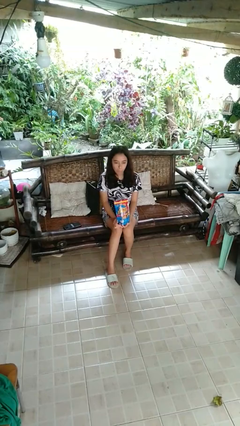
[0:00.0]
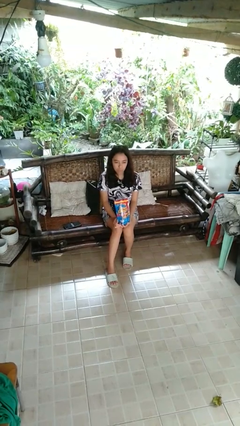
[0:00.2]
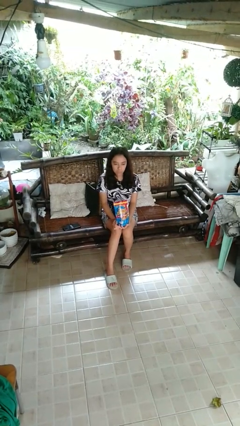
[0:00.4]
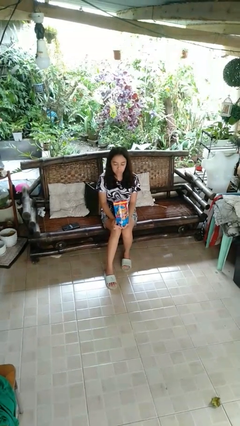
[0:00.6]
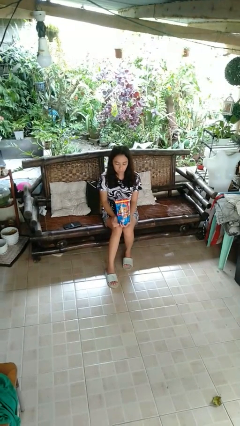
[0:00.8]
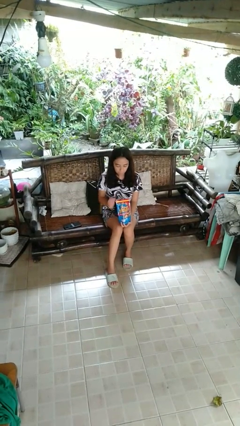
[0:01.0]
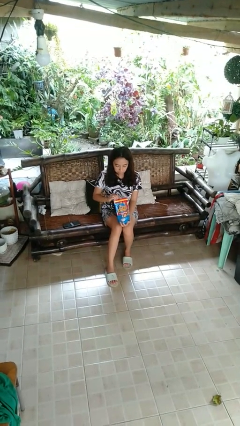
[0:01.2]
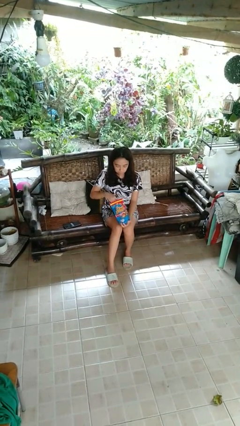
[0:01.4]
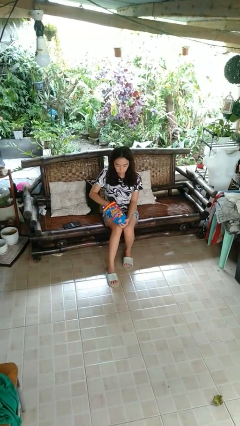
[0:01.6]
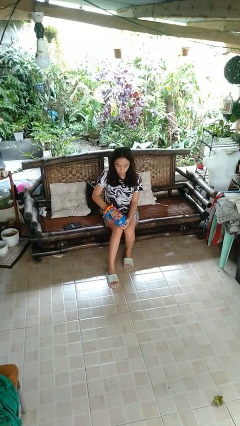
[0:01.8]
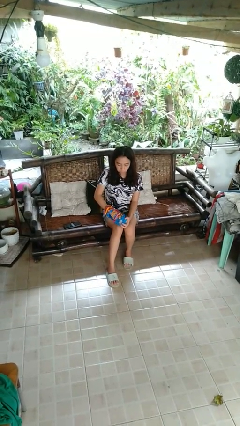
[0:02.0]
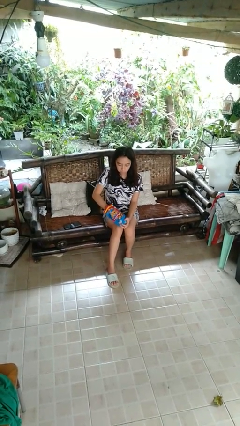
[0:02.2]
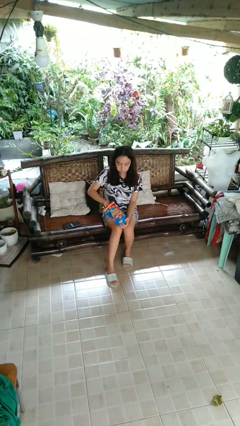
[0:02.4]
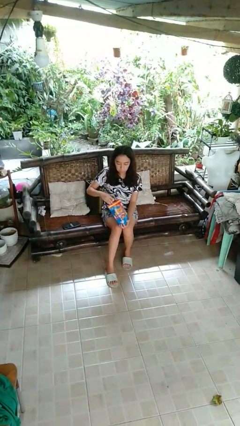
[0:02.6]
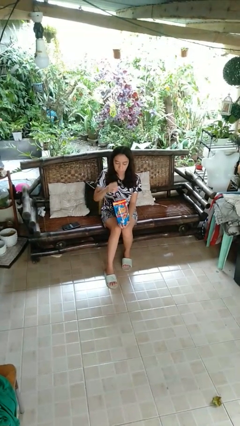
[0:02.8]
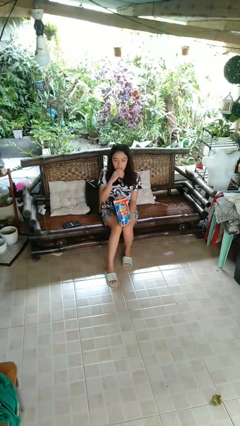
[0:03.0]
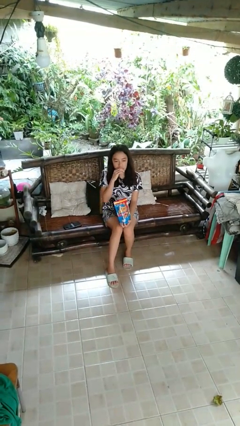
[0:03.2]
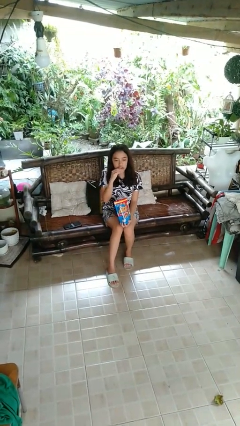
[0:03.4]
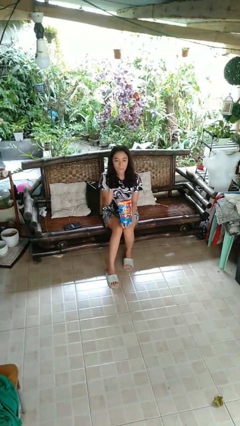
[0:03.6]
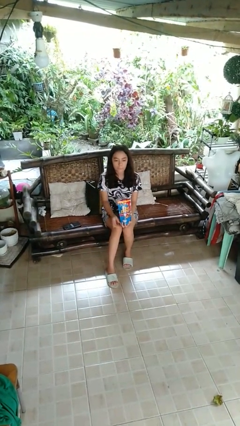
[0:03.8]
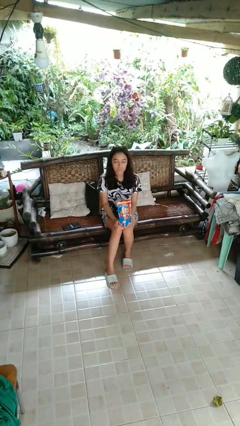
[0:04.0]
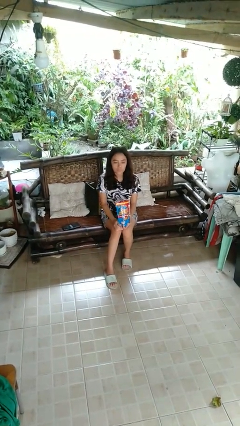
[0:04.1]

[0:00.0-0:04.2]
person eats snack from bag

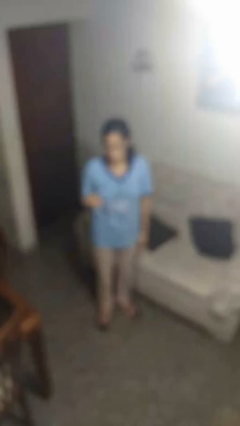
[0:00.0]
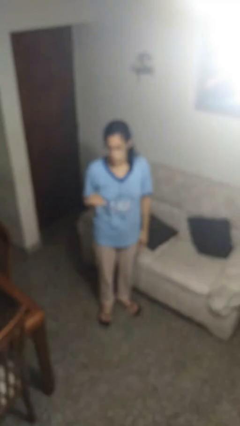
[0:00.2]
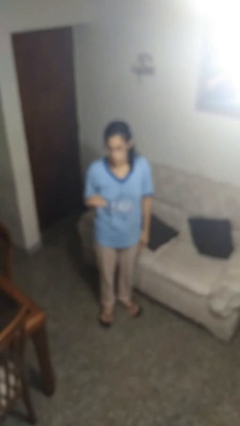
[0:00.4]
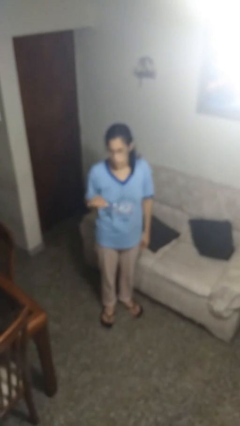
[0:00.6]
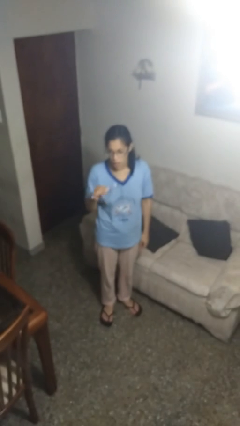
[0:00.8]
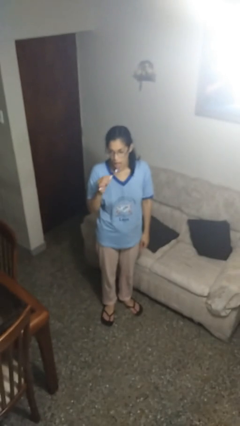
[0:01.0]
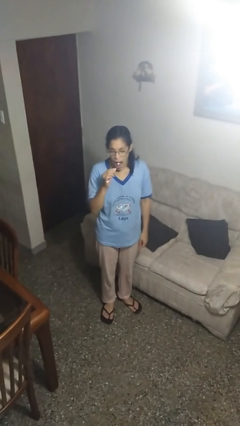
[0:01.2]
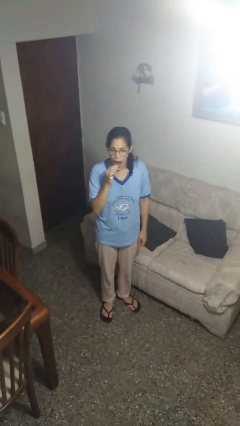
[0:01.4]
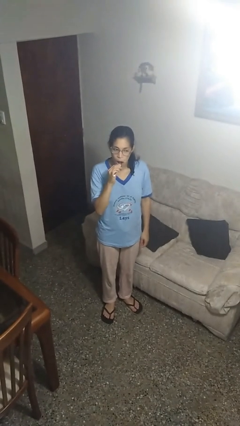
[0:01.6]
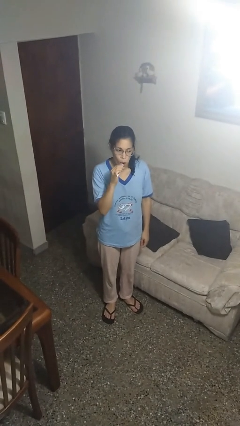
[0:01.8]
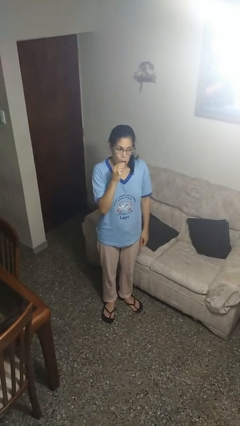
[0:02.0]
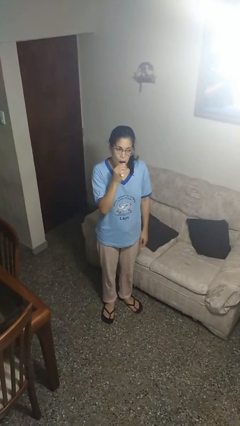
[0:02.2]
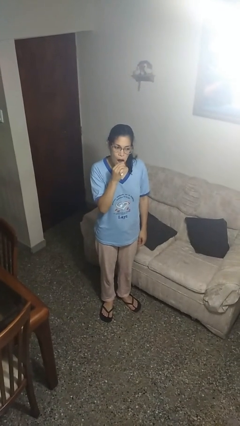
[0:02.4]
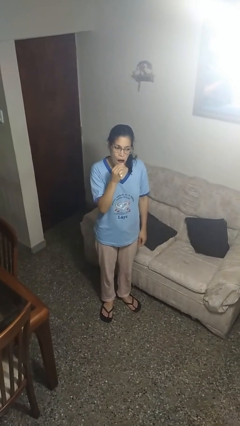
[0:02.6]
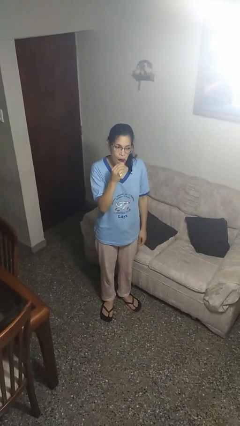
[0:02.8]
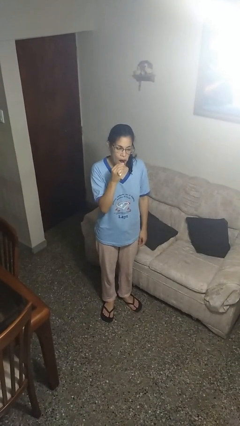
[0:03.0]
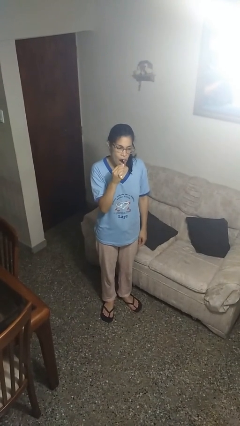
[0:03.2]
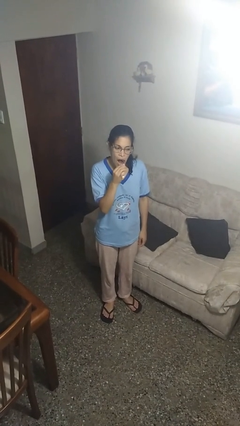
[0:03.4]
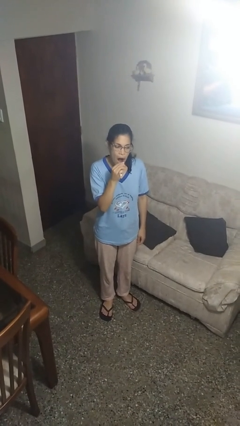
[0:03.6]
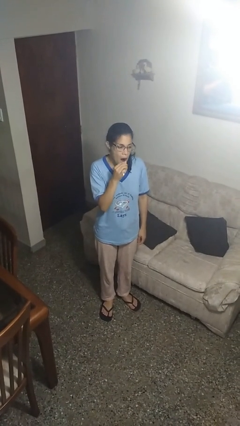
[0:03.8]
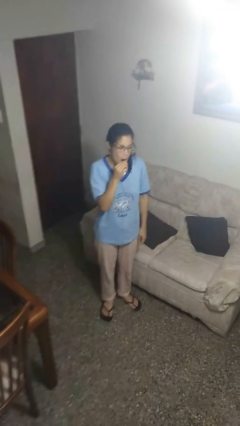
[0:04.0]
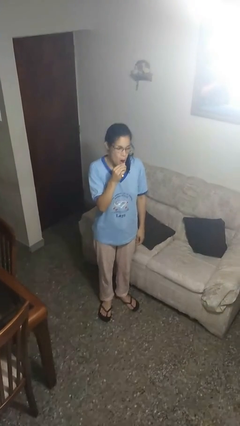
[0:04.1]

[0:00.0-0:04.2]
person brushes teeth

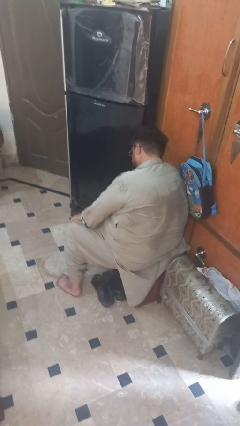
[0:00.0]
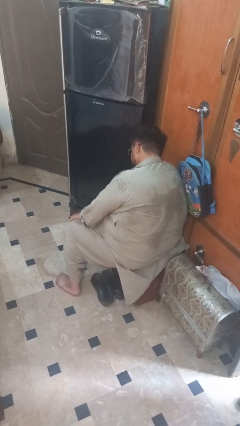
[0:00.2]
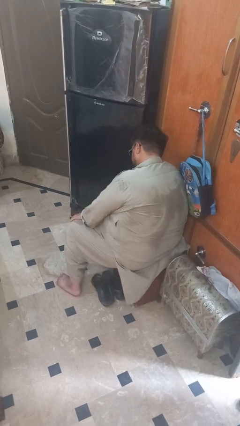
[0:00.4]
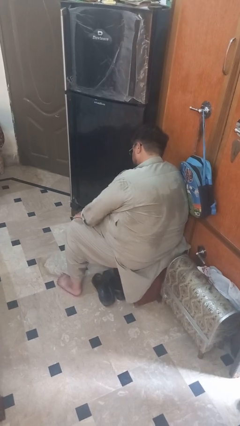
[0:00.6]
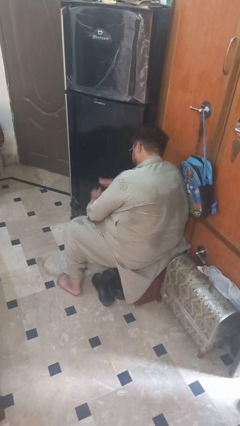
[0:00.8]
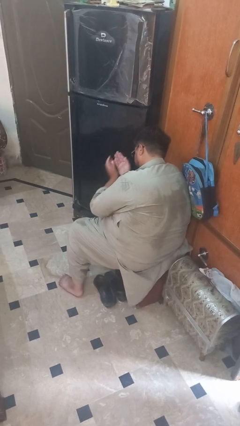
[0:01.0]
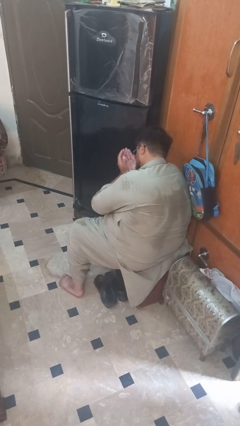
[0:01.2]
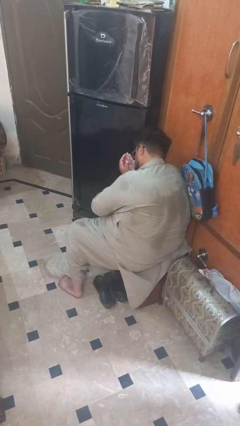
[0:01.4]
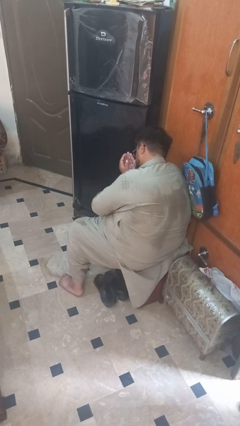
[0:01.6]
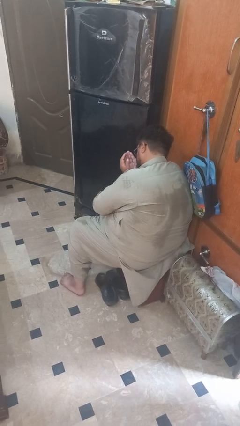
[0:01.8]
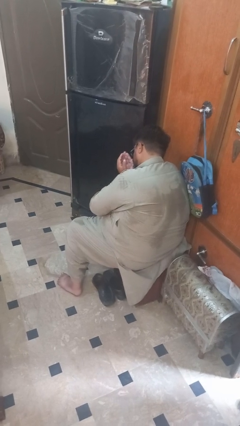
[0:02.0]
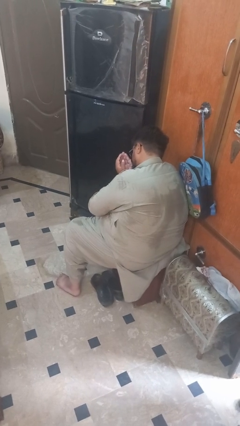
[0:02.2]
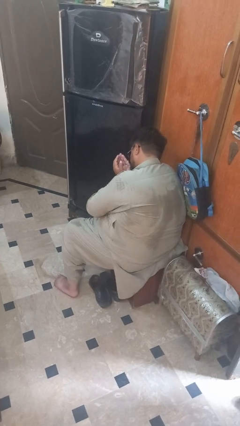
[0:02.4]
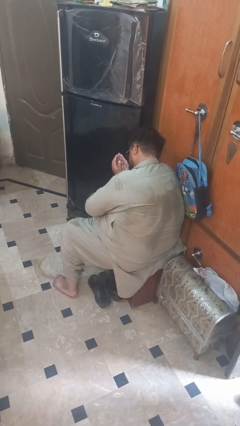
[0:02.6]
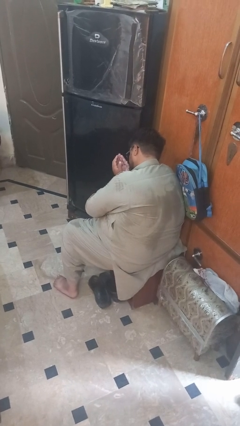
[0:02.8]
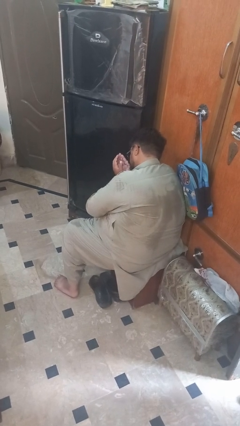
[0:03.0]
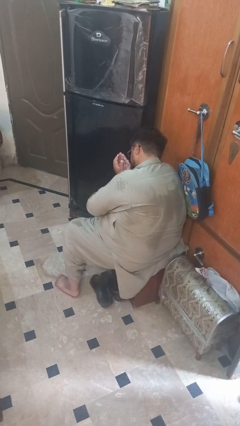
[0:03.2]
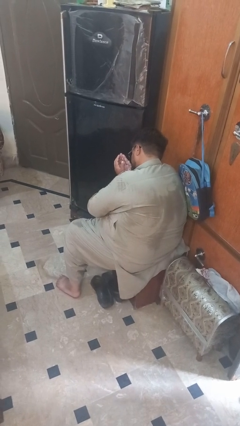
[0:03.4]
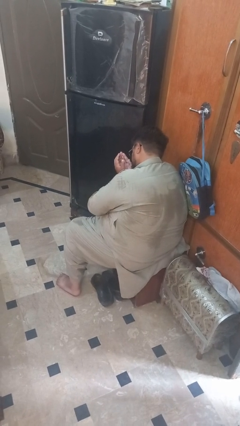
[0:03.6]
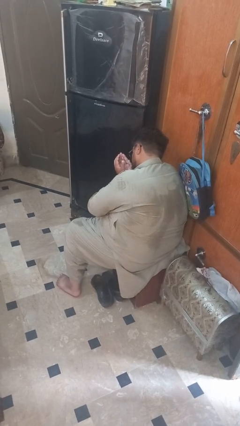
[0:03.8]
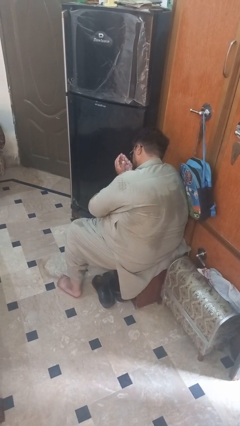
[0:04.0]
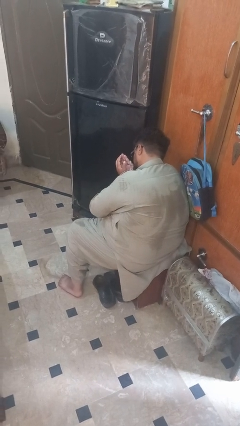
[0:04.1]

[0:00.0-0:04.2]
person prays

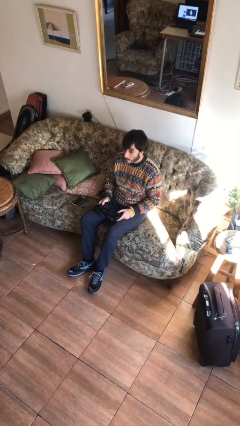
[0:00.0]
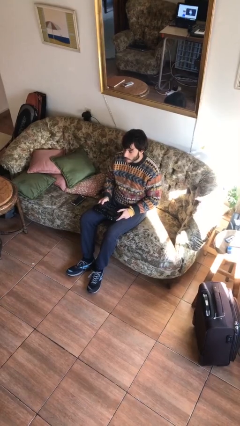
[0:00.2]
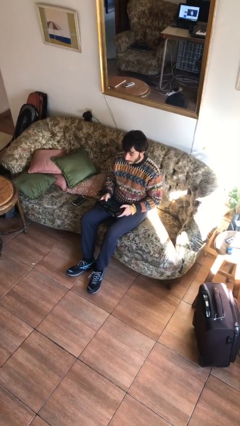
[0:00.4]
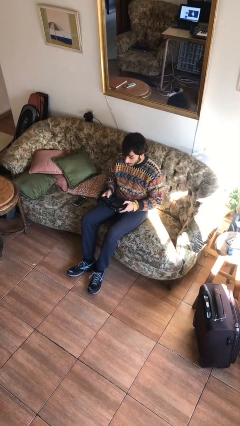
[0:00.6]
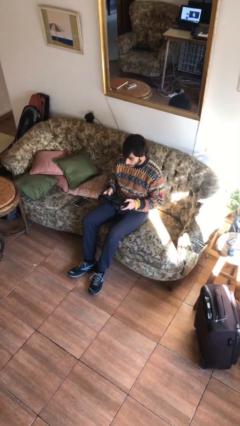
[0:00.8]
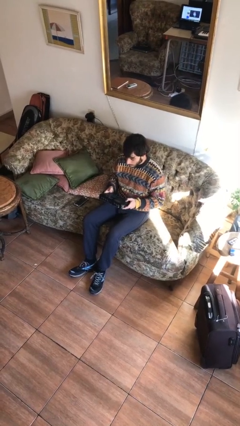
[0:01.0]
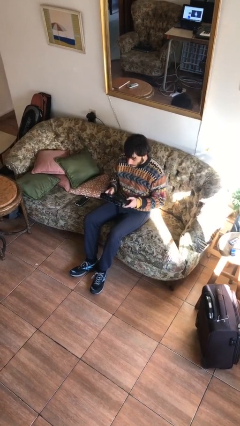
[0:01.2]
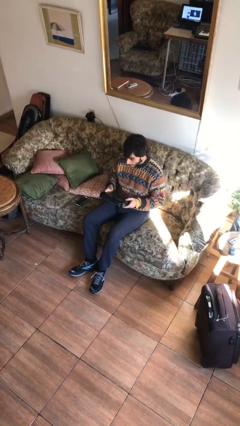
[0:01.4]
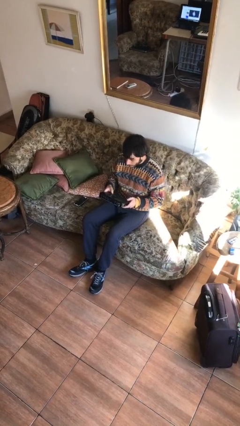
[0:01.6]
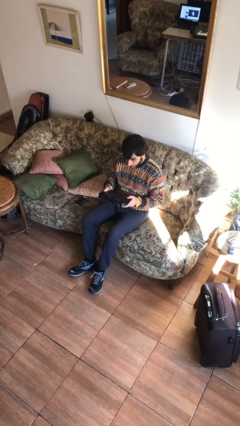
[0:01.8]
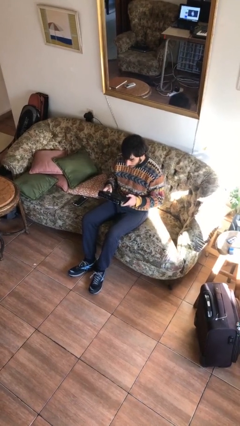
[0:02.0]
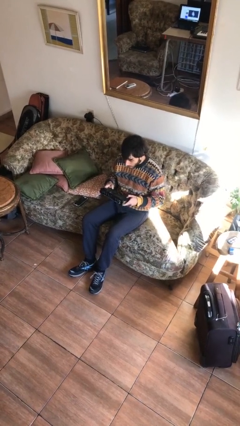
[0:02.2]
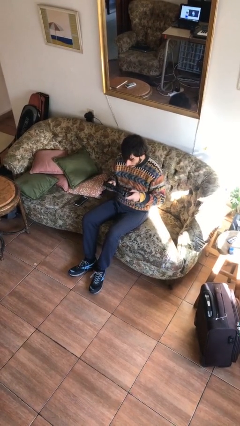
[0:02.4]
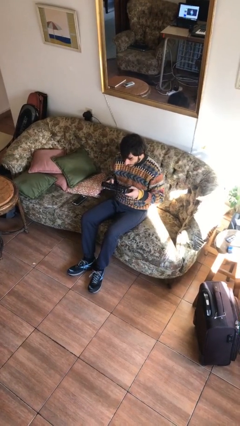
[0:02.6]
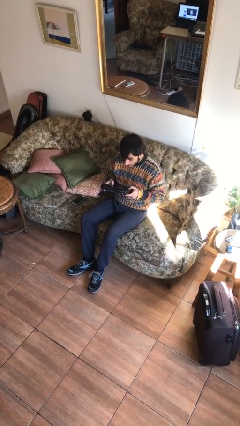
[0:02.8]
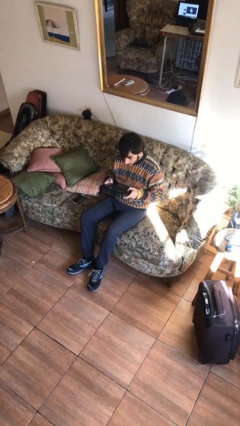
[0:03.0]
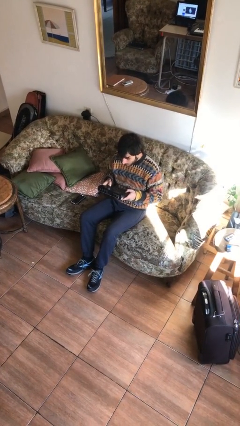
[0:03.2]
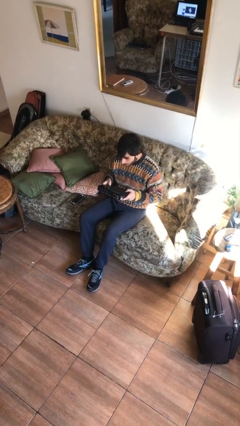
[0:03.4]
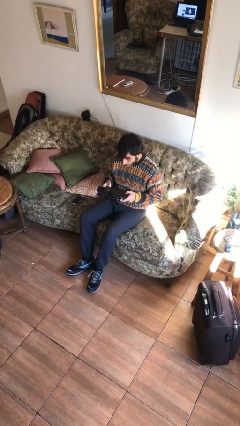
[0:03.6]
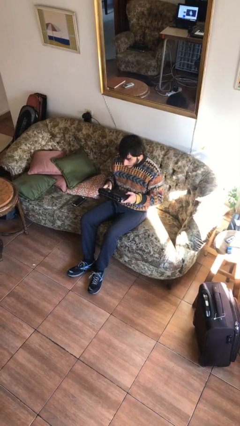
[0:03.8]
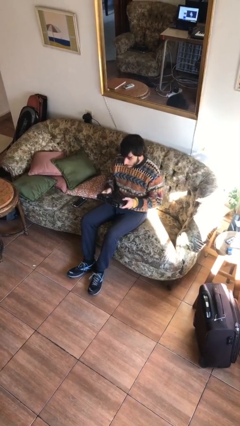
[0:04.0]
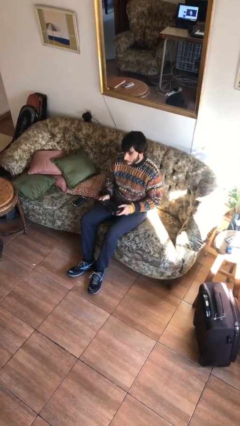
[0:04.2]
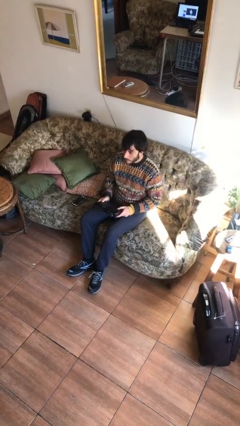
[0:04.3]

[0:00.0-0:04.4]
person interacts with handheld game

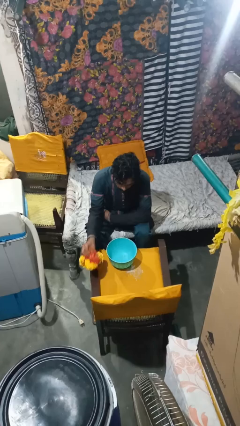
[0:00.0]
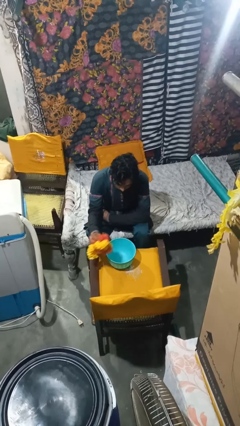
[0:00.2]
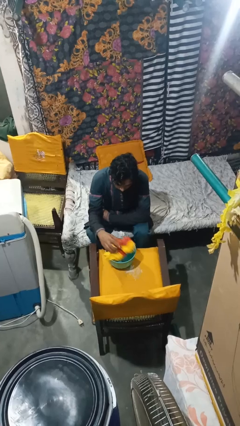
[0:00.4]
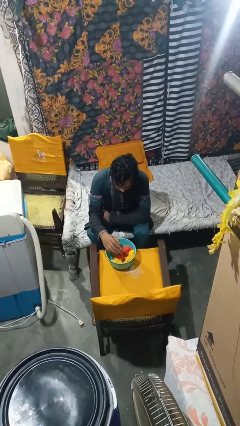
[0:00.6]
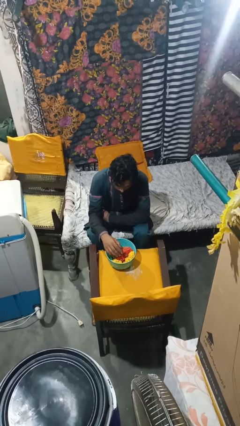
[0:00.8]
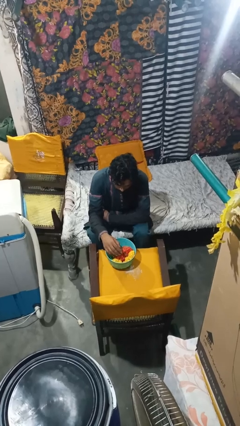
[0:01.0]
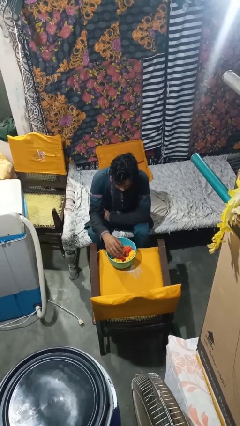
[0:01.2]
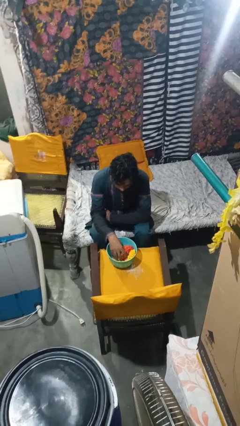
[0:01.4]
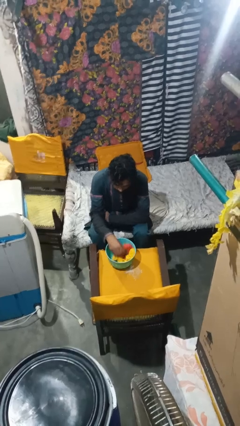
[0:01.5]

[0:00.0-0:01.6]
person pours into bowl
